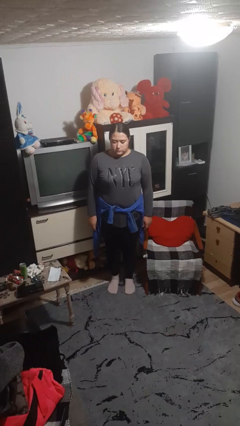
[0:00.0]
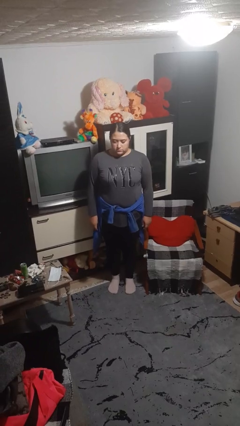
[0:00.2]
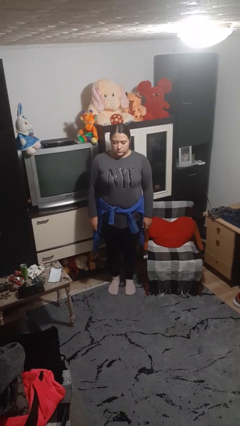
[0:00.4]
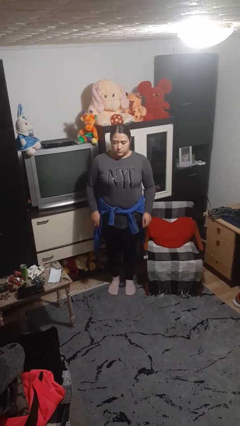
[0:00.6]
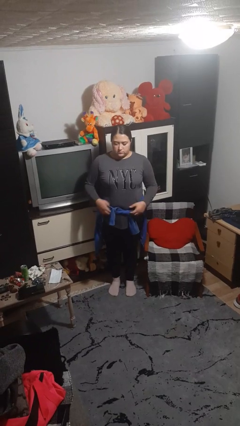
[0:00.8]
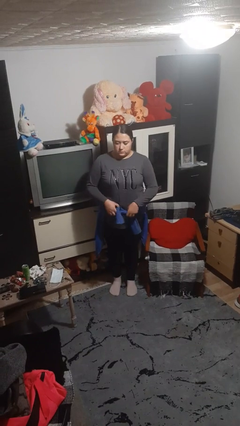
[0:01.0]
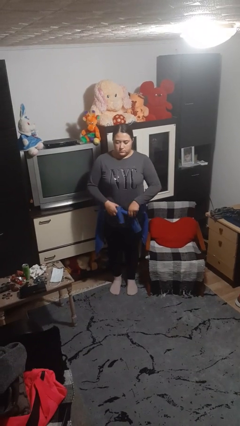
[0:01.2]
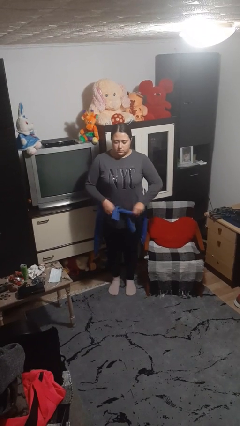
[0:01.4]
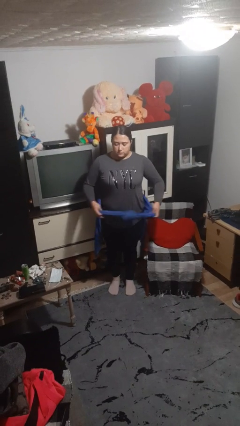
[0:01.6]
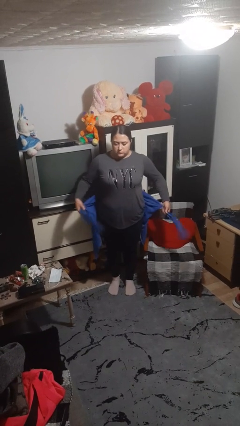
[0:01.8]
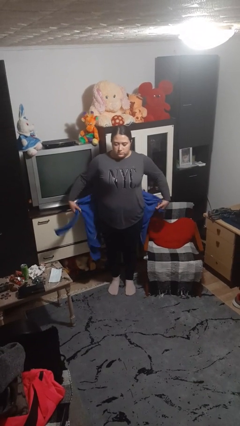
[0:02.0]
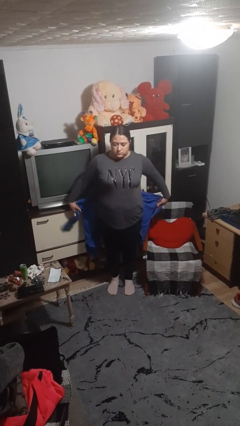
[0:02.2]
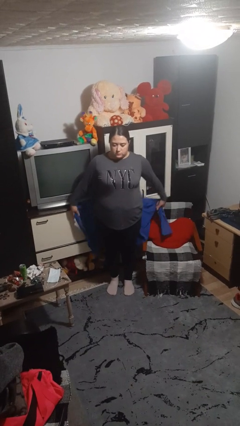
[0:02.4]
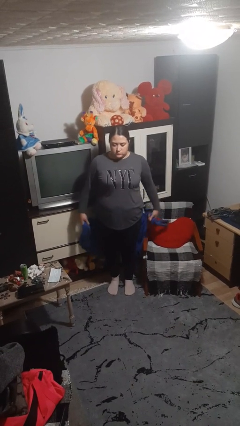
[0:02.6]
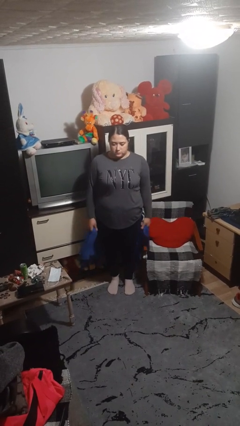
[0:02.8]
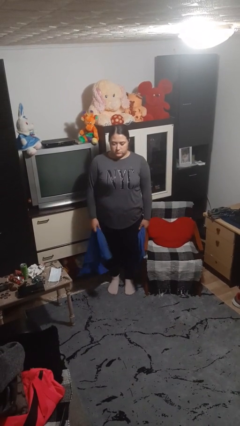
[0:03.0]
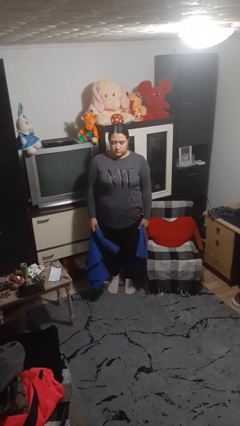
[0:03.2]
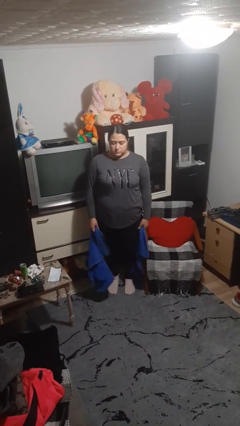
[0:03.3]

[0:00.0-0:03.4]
person unties jacket around waist

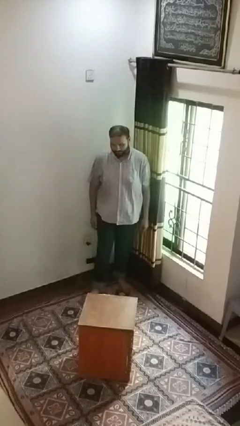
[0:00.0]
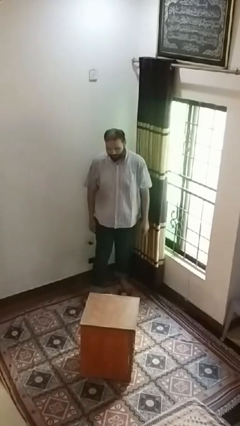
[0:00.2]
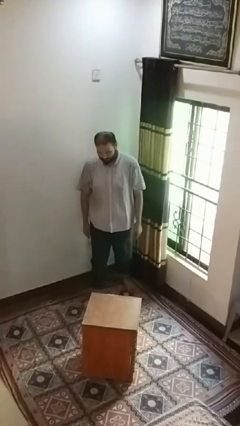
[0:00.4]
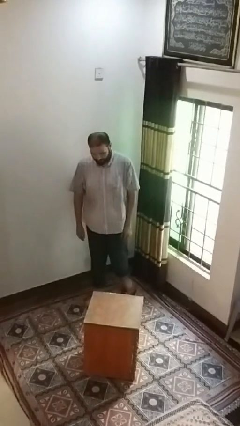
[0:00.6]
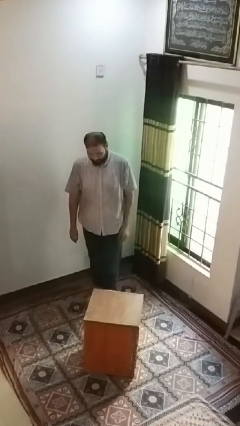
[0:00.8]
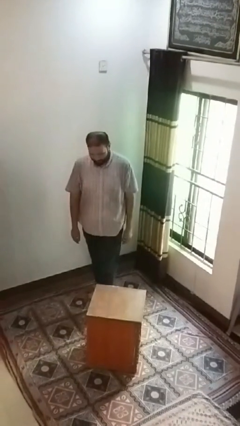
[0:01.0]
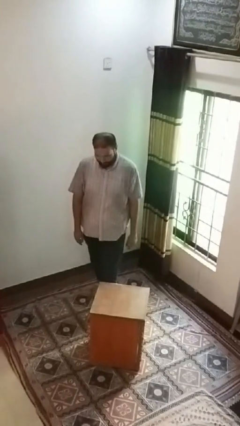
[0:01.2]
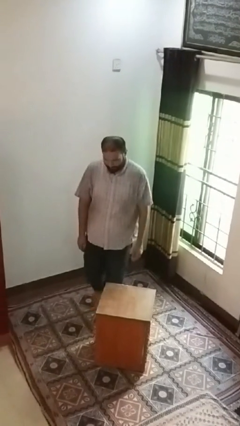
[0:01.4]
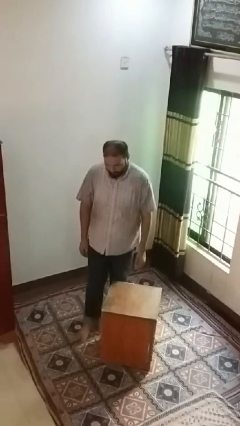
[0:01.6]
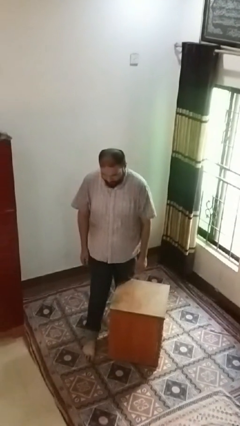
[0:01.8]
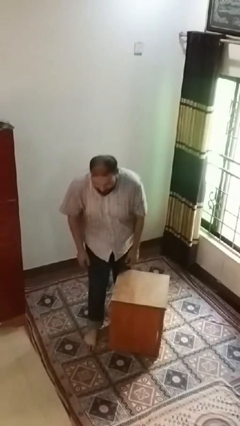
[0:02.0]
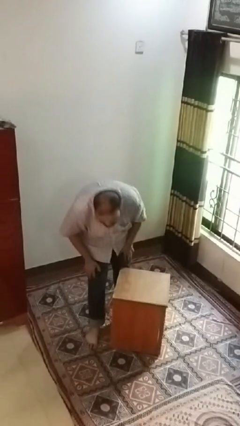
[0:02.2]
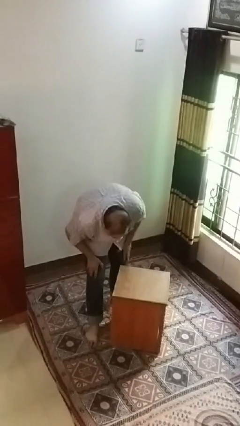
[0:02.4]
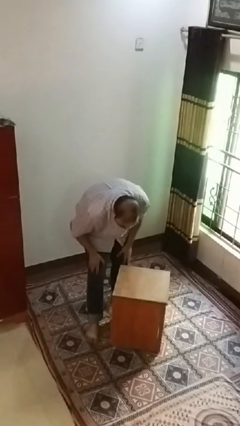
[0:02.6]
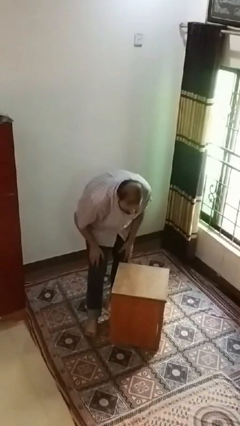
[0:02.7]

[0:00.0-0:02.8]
person bumps into table

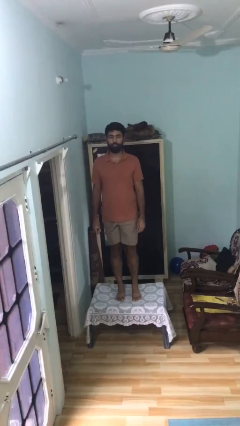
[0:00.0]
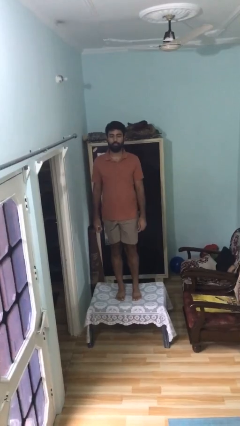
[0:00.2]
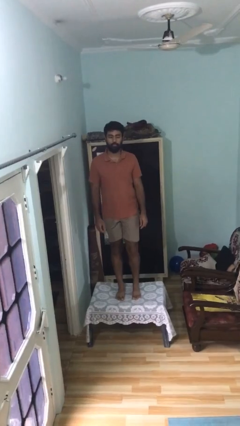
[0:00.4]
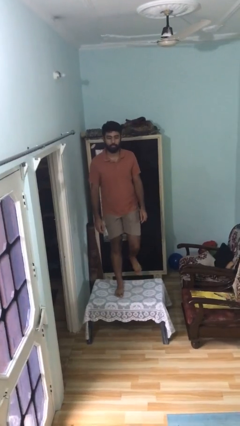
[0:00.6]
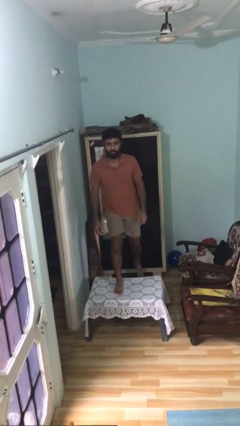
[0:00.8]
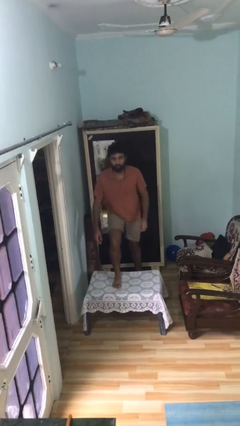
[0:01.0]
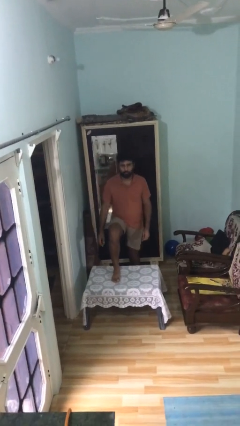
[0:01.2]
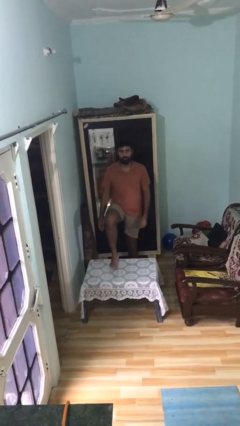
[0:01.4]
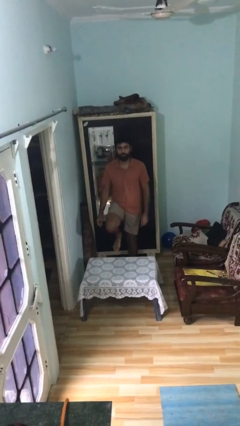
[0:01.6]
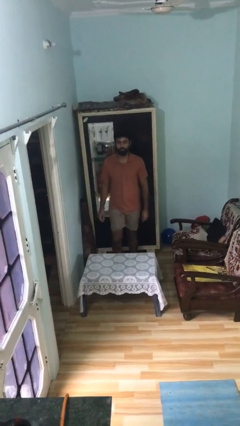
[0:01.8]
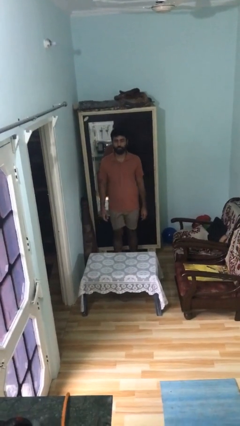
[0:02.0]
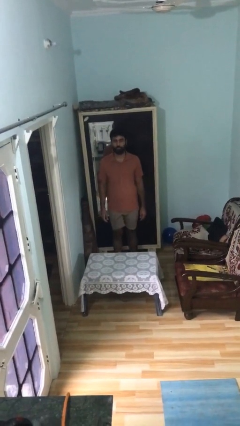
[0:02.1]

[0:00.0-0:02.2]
person climbs off table

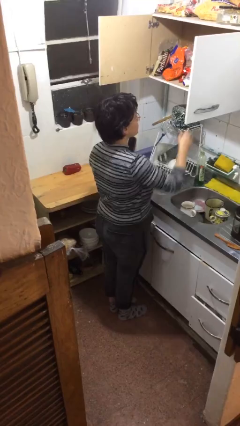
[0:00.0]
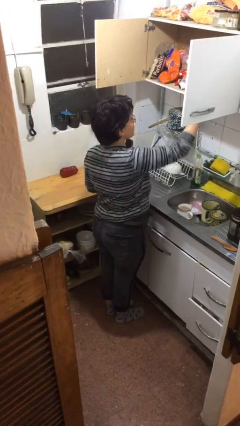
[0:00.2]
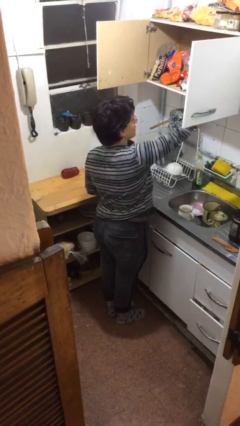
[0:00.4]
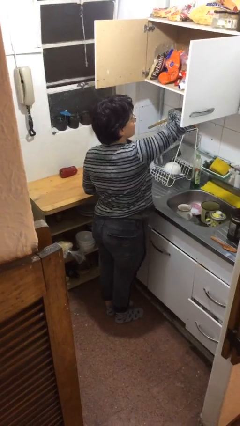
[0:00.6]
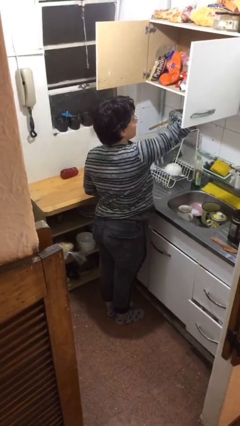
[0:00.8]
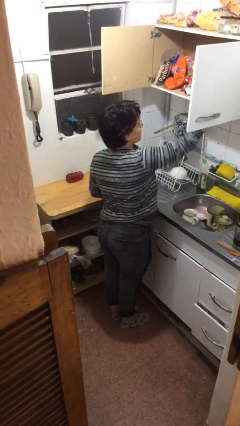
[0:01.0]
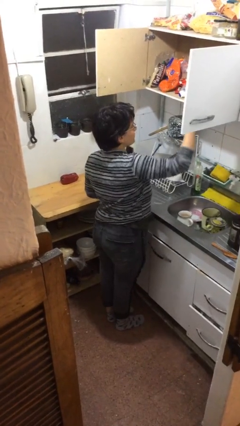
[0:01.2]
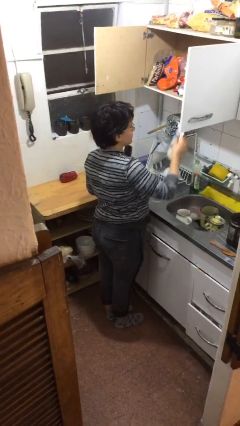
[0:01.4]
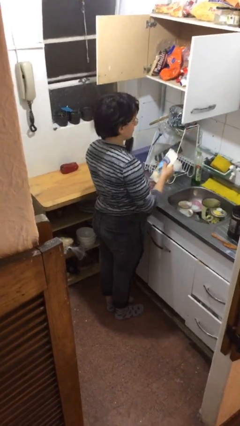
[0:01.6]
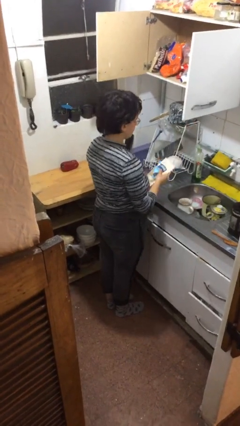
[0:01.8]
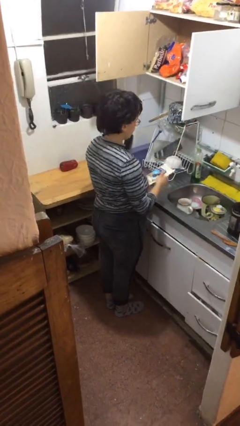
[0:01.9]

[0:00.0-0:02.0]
person takes object from cabinet

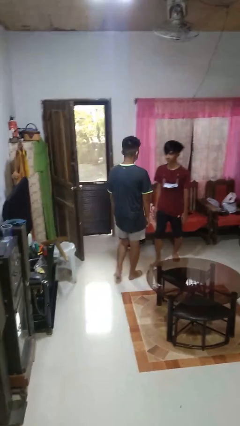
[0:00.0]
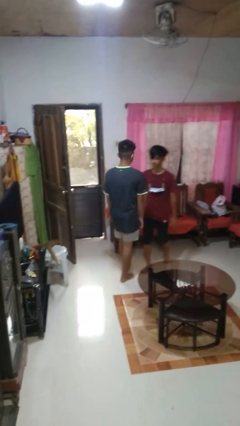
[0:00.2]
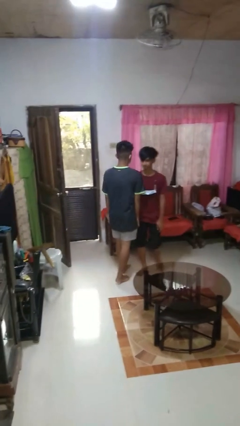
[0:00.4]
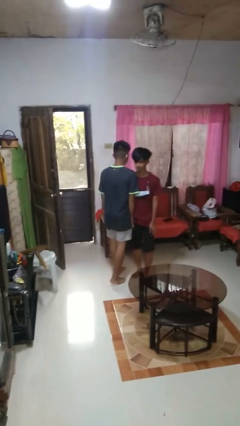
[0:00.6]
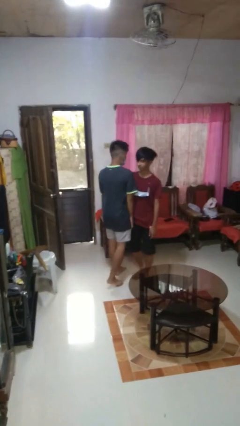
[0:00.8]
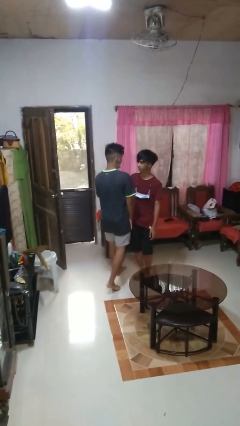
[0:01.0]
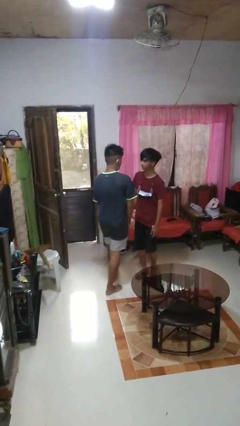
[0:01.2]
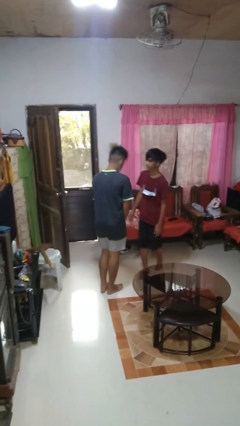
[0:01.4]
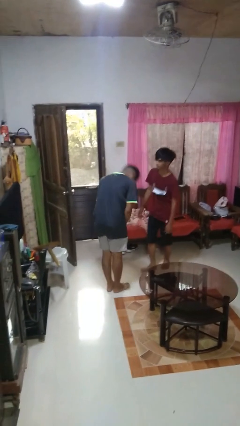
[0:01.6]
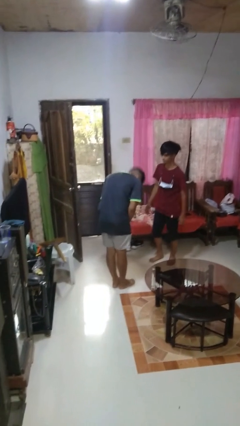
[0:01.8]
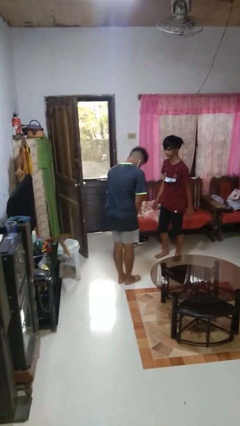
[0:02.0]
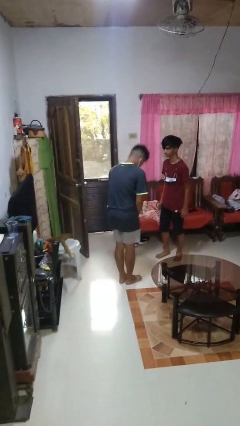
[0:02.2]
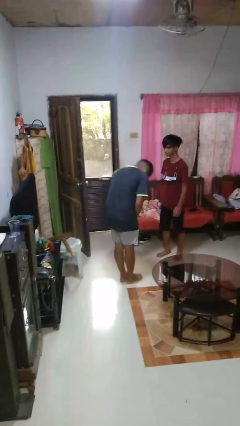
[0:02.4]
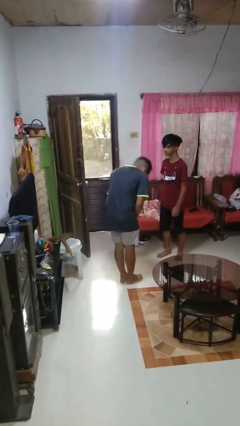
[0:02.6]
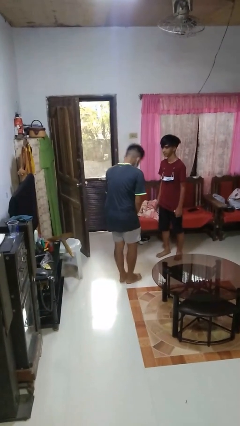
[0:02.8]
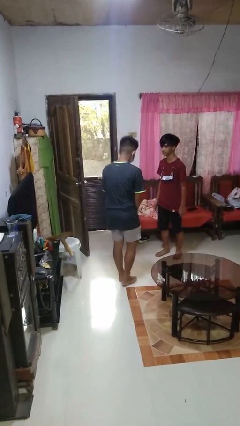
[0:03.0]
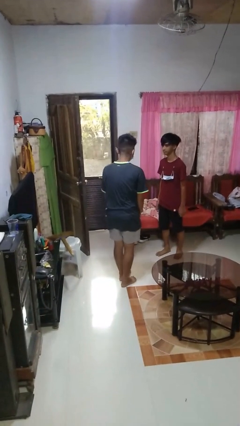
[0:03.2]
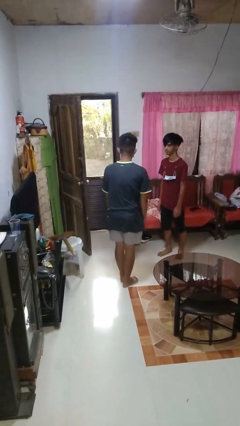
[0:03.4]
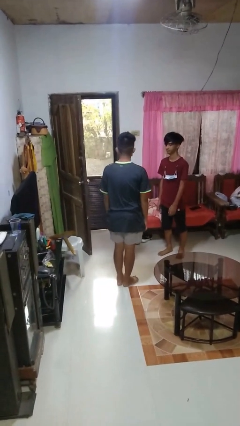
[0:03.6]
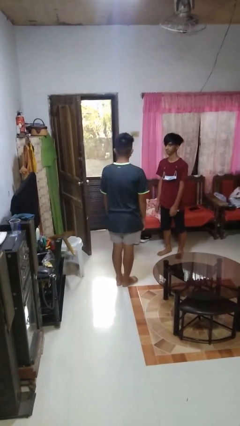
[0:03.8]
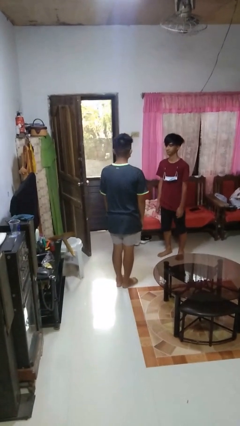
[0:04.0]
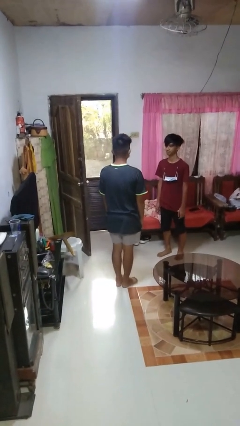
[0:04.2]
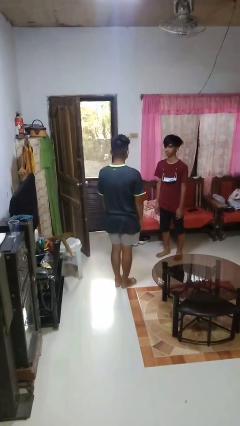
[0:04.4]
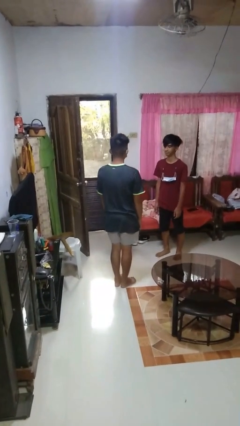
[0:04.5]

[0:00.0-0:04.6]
person bumps into person

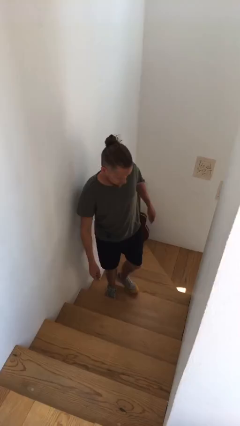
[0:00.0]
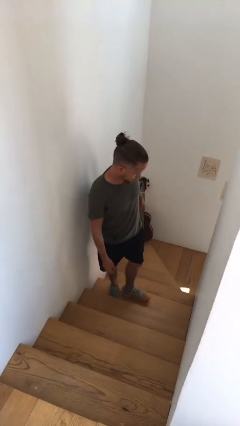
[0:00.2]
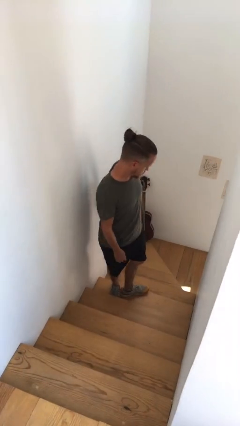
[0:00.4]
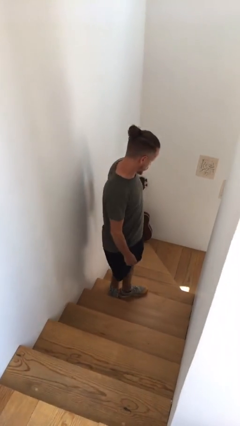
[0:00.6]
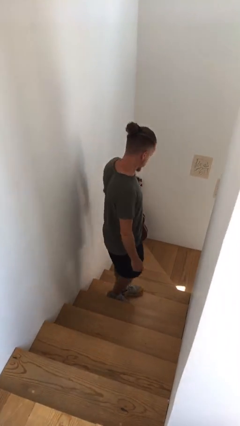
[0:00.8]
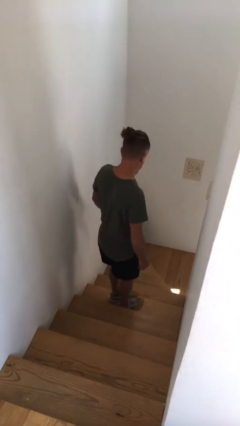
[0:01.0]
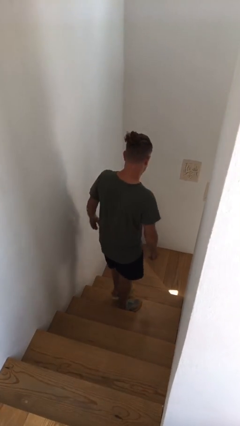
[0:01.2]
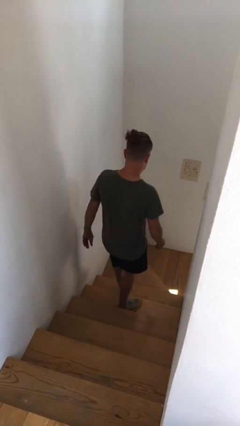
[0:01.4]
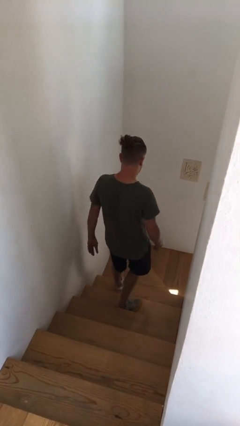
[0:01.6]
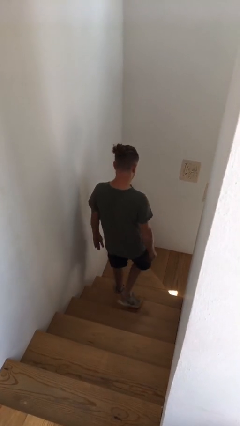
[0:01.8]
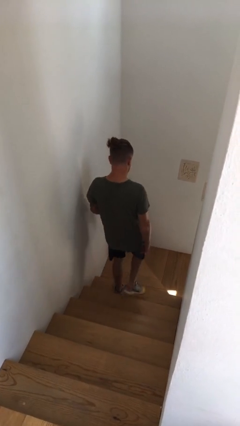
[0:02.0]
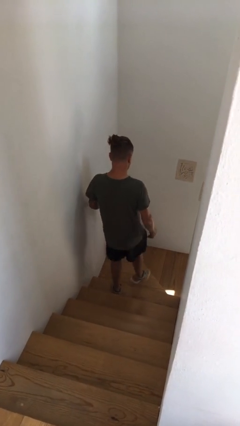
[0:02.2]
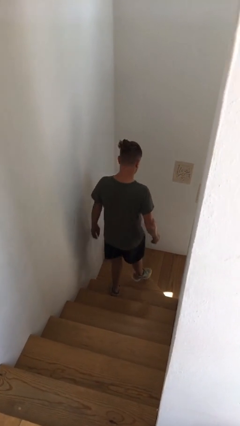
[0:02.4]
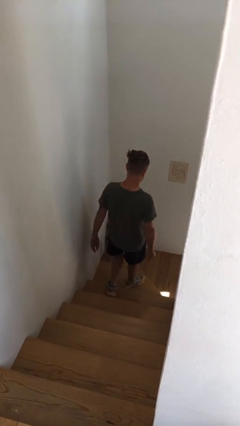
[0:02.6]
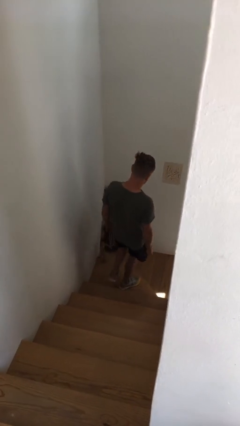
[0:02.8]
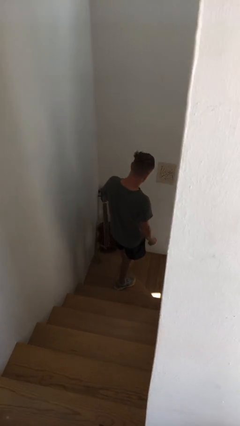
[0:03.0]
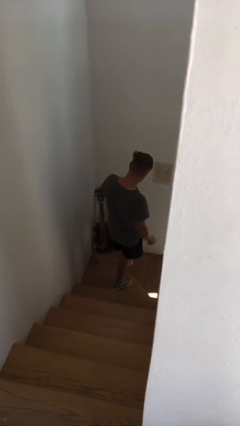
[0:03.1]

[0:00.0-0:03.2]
person climbs down stairs
